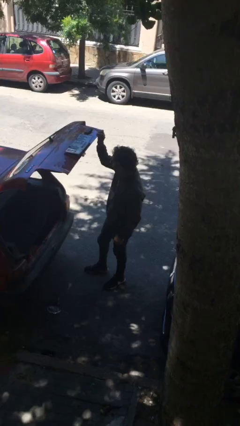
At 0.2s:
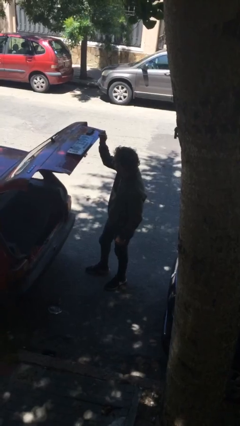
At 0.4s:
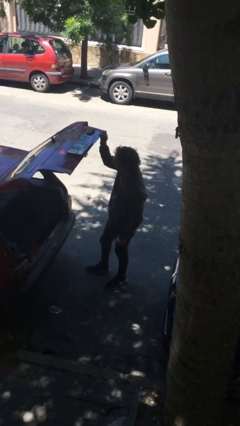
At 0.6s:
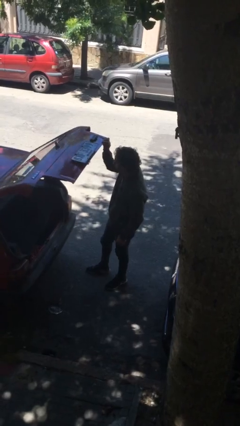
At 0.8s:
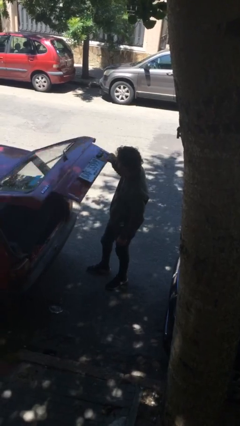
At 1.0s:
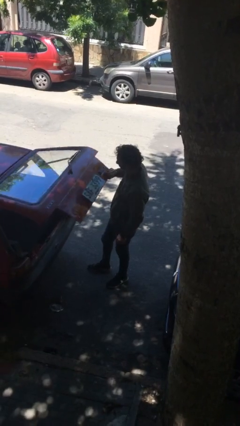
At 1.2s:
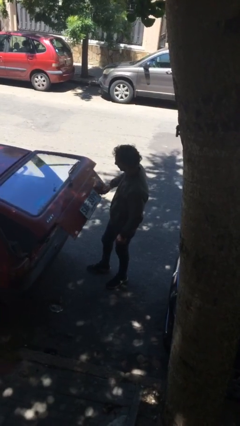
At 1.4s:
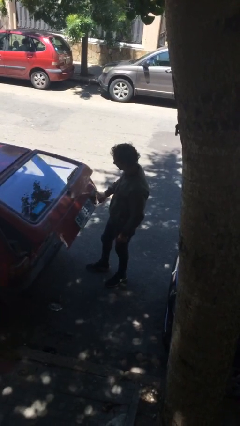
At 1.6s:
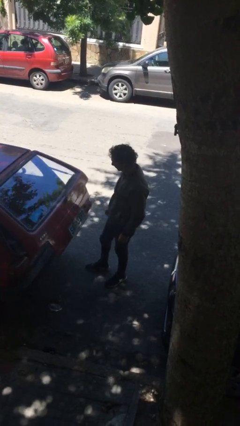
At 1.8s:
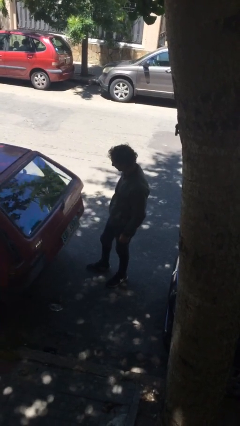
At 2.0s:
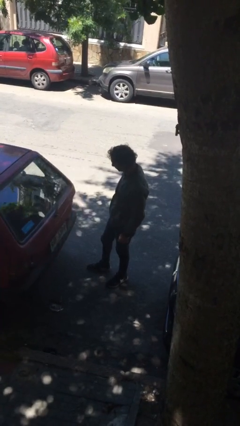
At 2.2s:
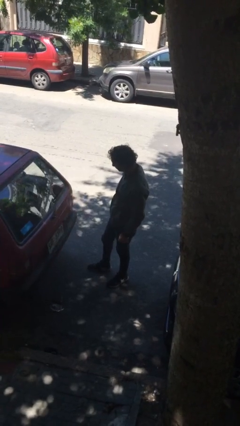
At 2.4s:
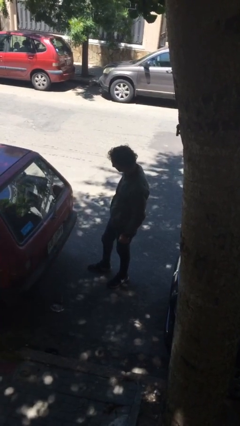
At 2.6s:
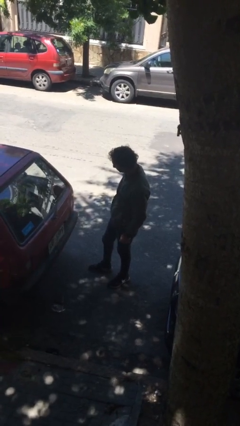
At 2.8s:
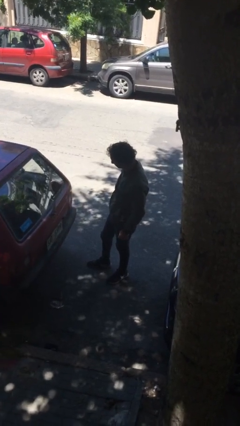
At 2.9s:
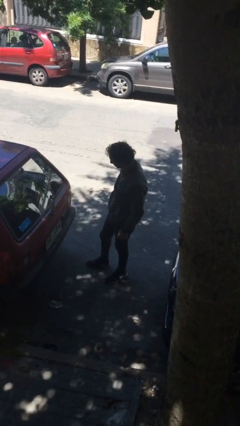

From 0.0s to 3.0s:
person closes car trunk

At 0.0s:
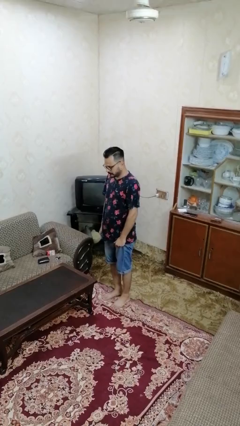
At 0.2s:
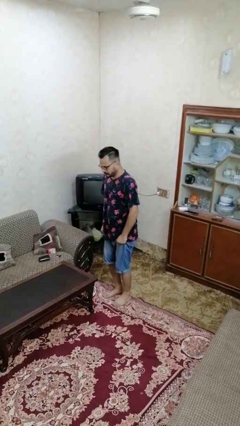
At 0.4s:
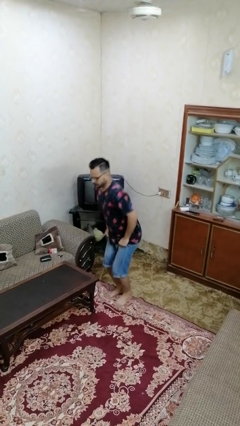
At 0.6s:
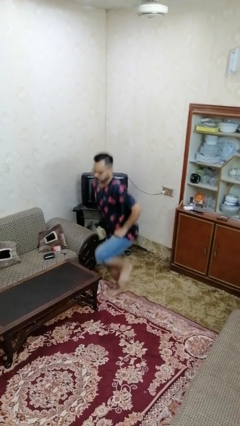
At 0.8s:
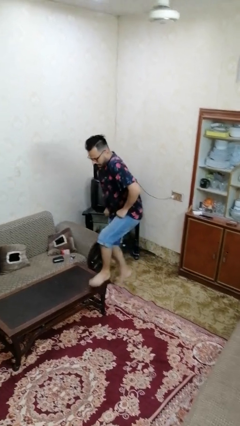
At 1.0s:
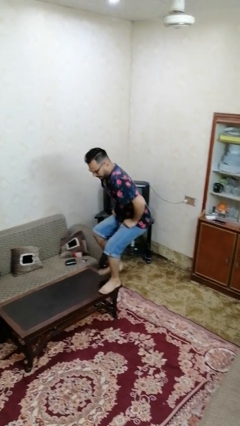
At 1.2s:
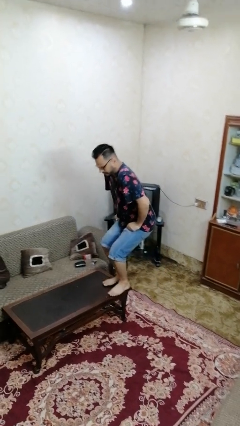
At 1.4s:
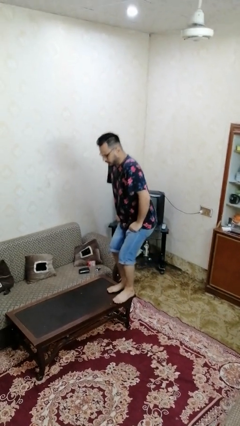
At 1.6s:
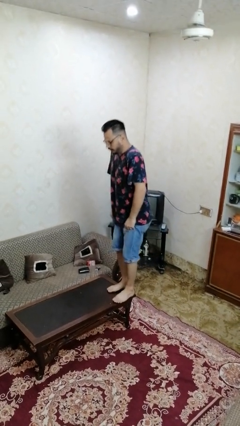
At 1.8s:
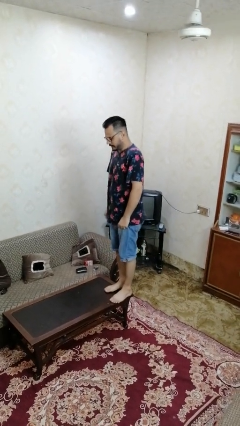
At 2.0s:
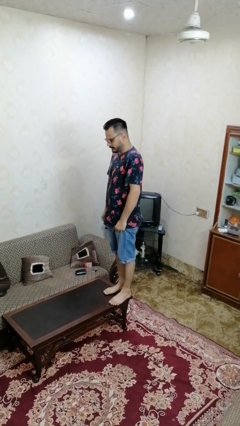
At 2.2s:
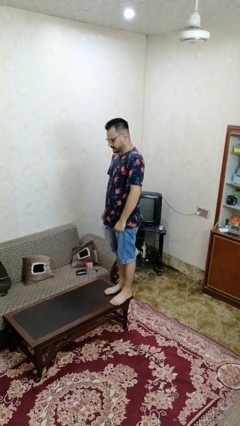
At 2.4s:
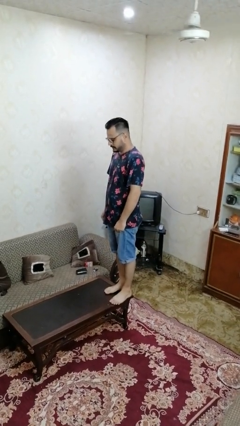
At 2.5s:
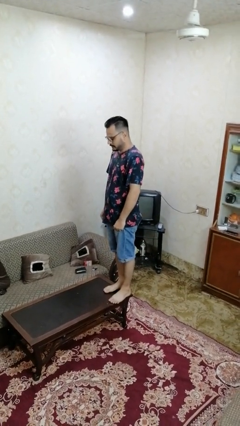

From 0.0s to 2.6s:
person climbs on table

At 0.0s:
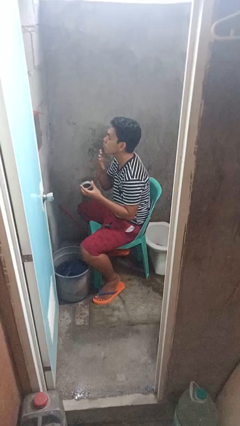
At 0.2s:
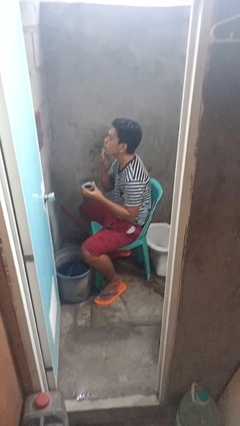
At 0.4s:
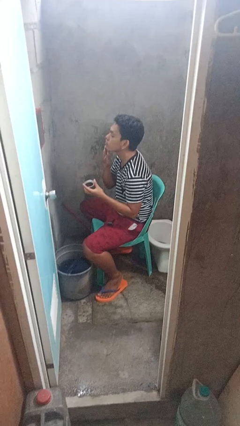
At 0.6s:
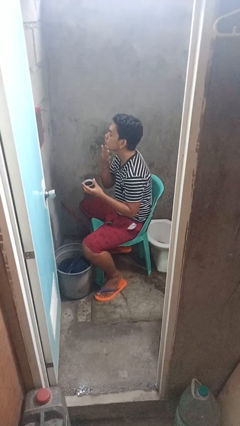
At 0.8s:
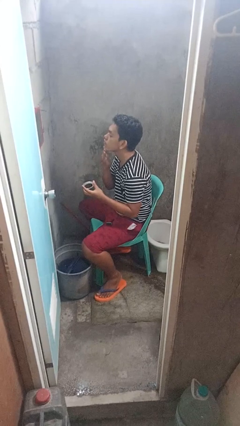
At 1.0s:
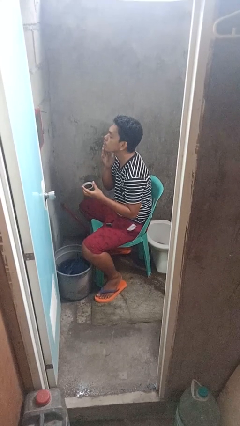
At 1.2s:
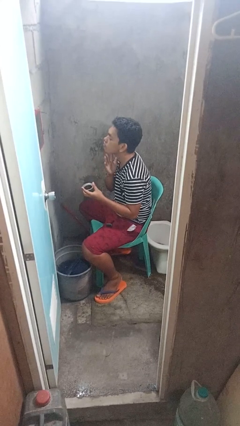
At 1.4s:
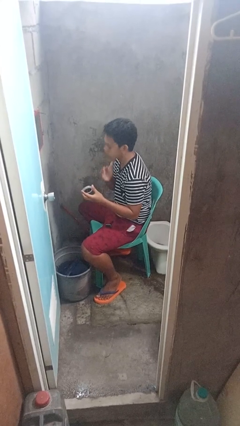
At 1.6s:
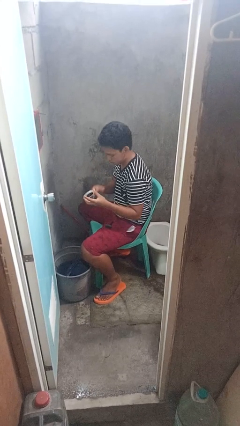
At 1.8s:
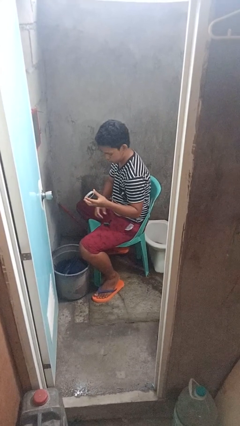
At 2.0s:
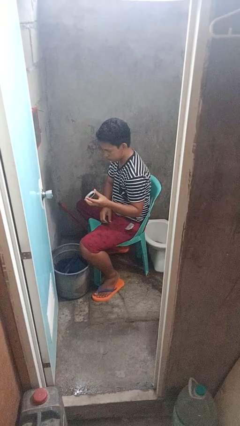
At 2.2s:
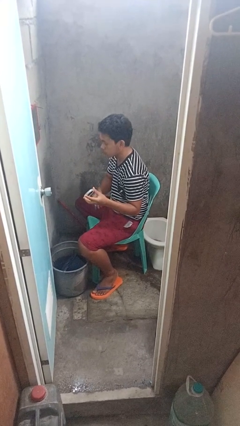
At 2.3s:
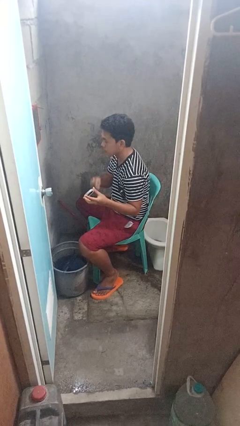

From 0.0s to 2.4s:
person applies shaving cream

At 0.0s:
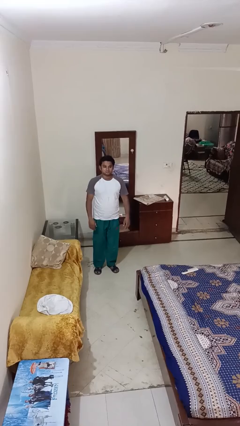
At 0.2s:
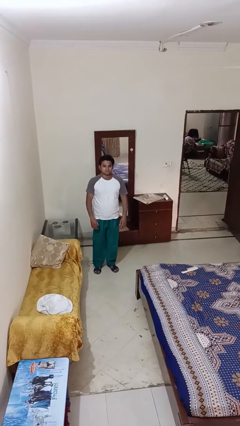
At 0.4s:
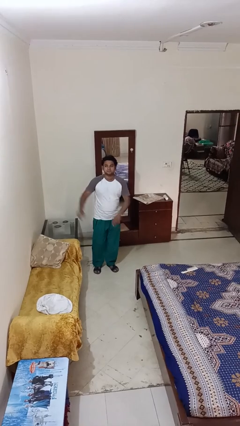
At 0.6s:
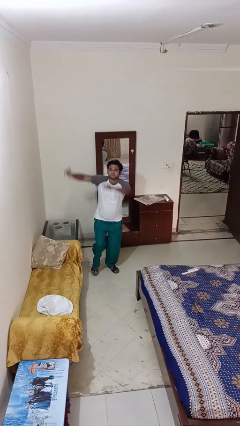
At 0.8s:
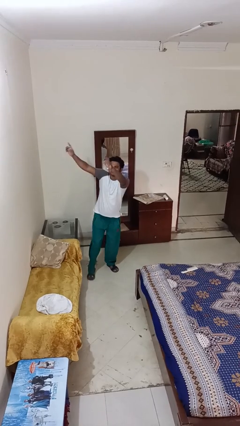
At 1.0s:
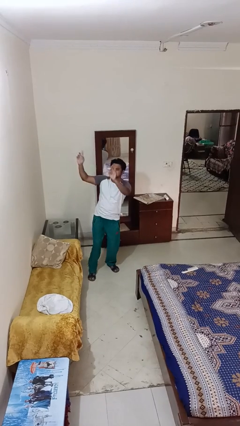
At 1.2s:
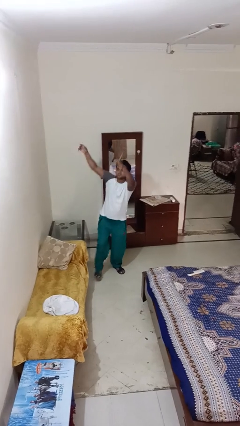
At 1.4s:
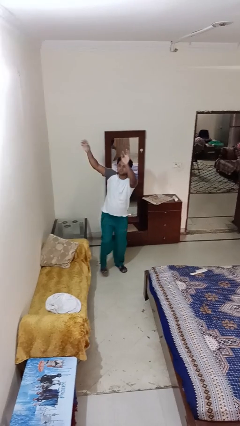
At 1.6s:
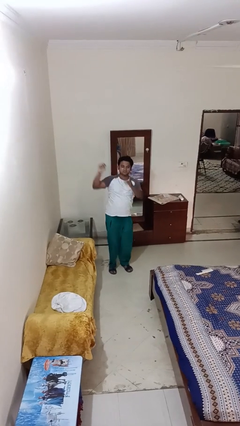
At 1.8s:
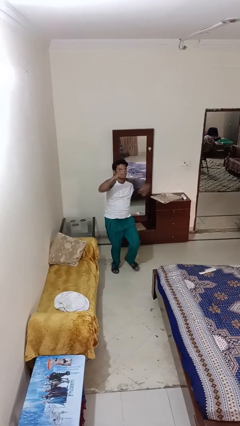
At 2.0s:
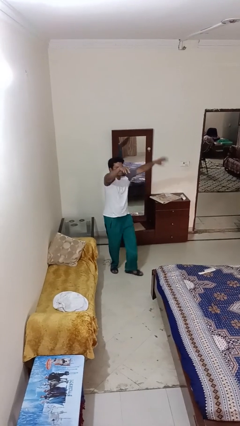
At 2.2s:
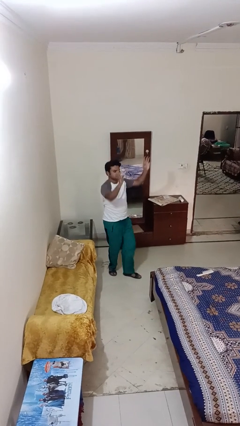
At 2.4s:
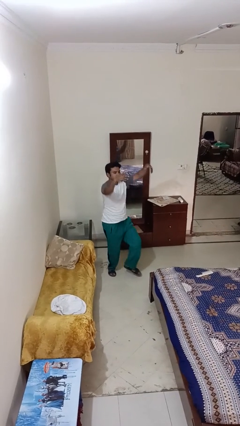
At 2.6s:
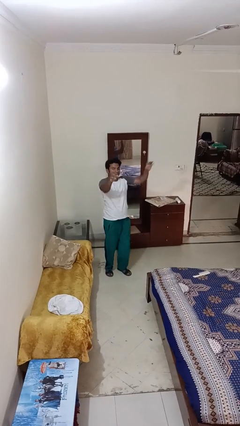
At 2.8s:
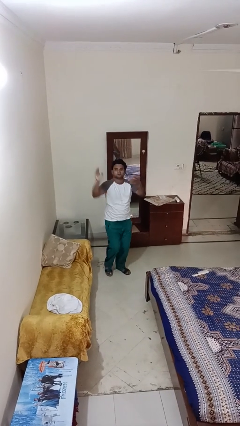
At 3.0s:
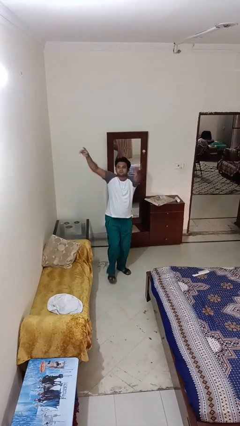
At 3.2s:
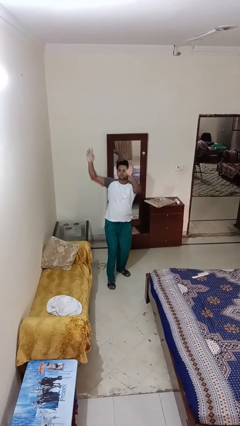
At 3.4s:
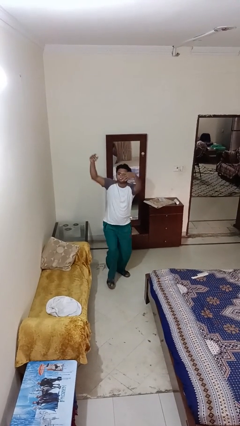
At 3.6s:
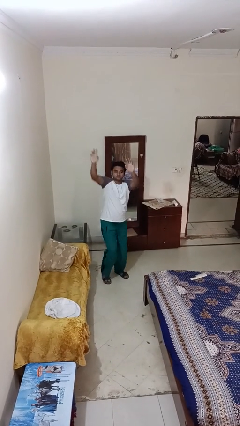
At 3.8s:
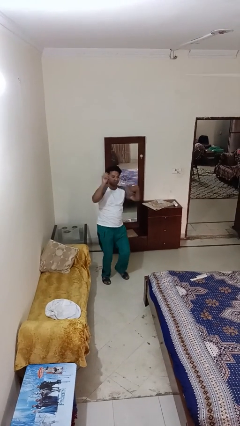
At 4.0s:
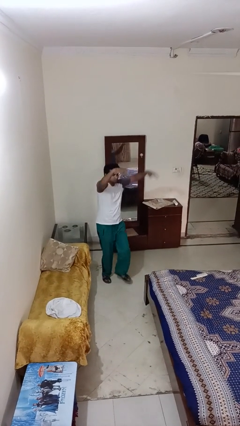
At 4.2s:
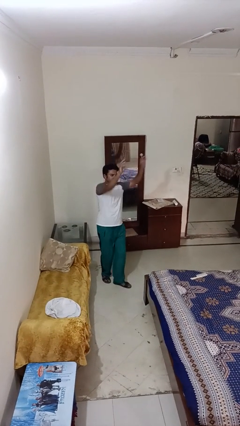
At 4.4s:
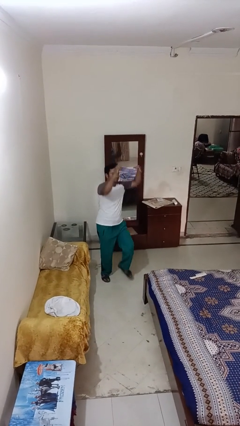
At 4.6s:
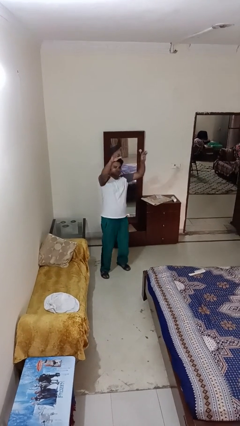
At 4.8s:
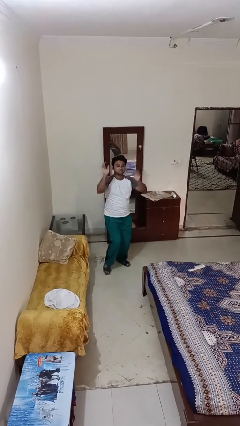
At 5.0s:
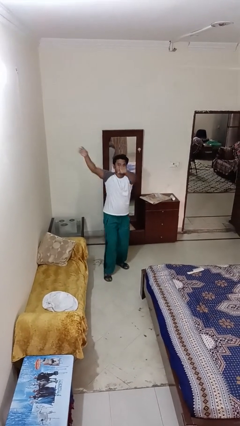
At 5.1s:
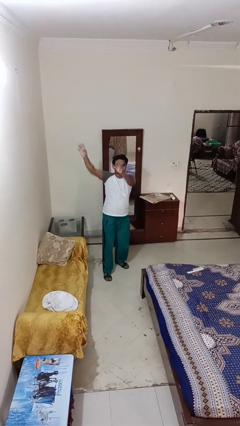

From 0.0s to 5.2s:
person dances in place

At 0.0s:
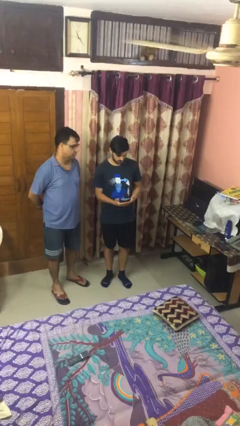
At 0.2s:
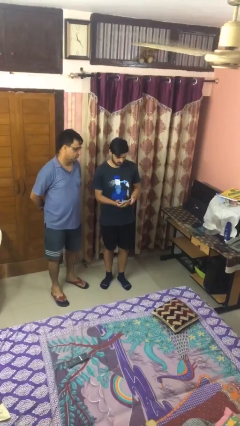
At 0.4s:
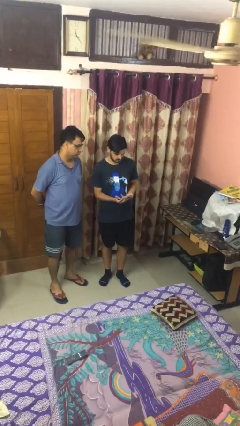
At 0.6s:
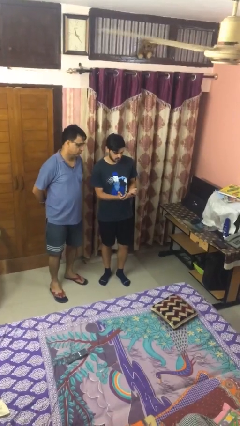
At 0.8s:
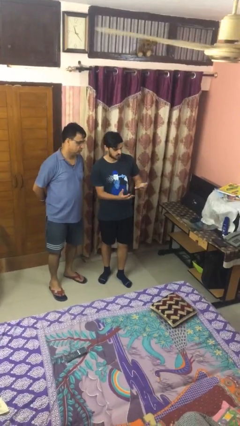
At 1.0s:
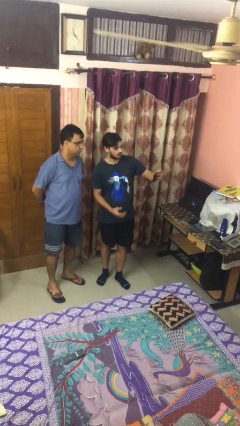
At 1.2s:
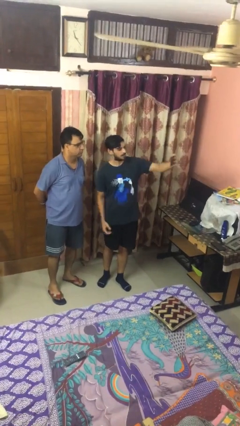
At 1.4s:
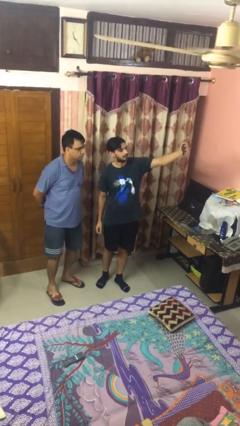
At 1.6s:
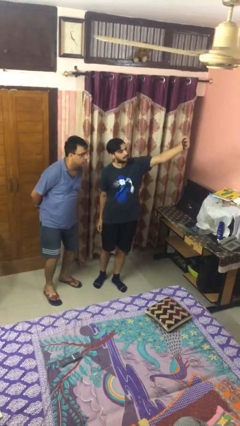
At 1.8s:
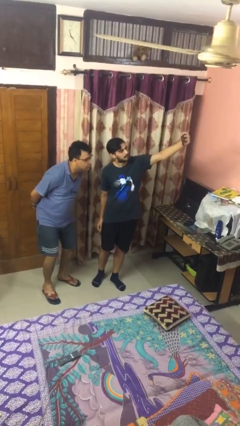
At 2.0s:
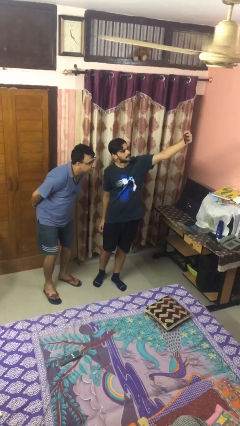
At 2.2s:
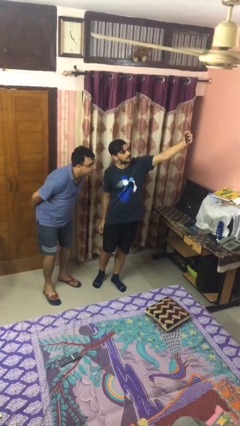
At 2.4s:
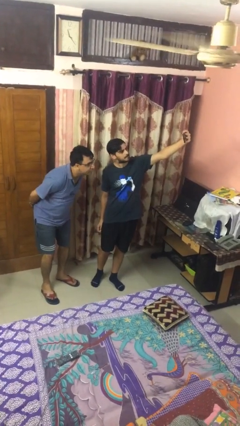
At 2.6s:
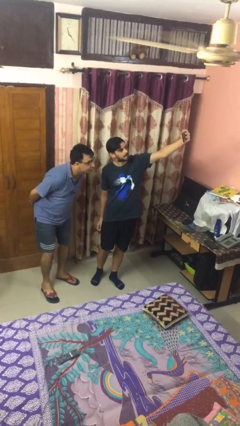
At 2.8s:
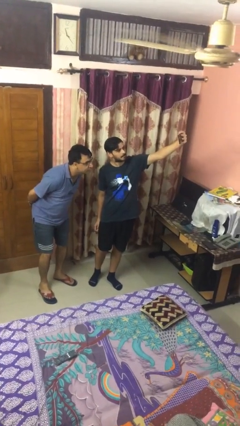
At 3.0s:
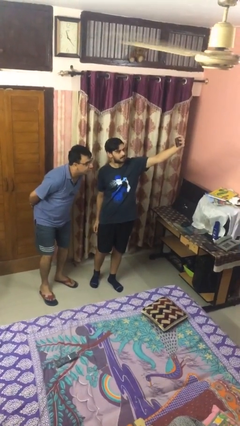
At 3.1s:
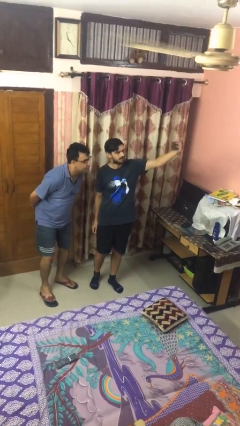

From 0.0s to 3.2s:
person takes selfie with person

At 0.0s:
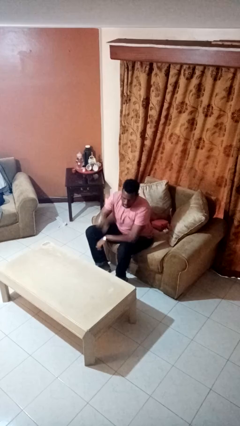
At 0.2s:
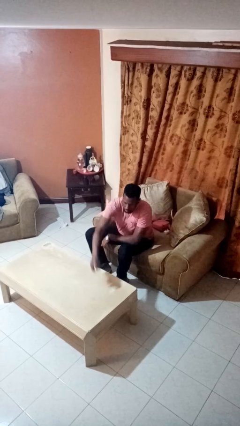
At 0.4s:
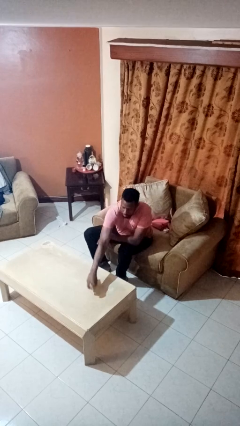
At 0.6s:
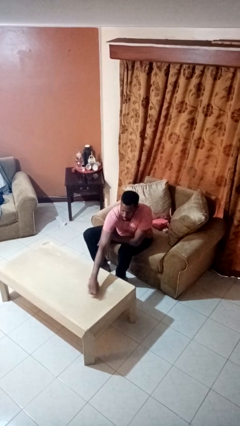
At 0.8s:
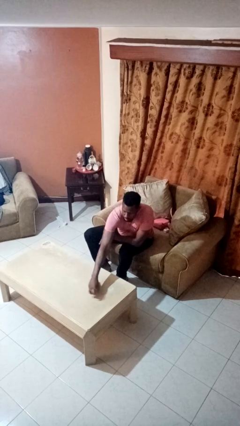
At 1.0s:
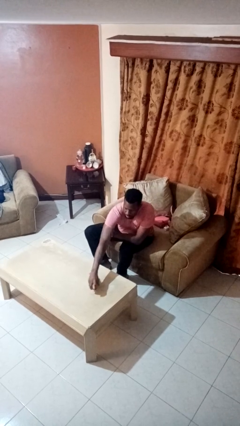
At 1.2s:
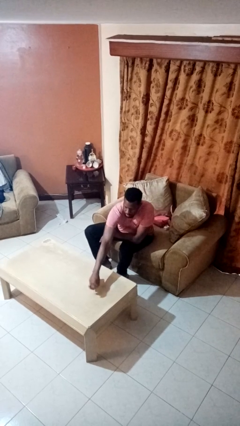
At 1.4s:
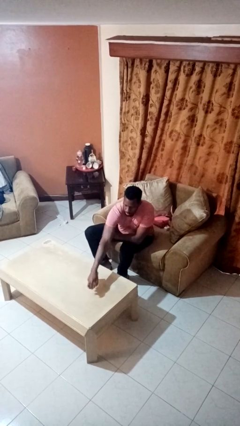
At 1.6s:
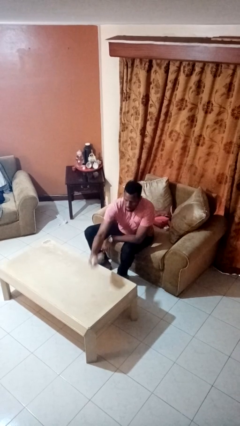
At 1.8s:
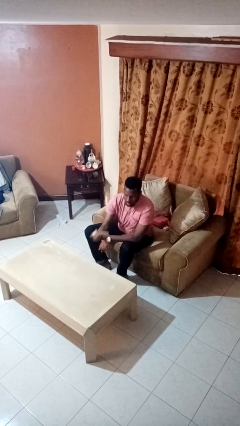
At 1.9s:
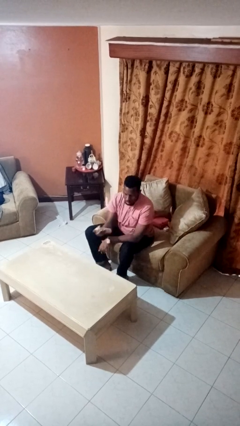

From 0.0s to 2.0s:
person sprays from bottle
